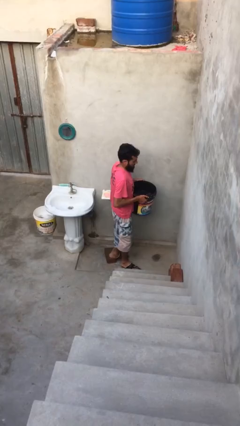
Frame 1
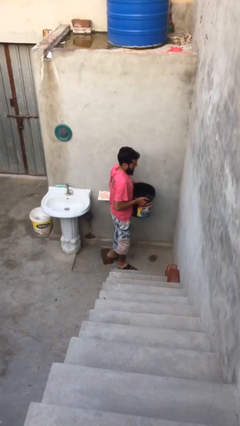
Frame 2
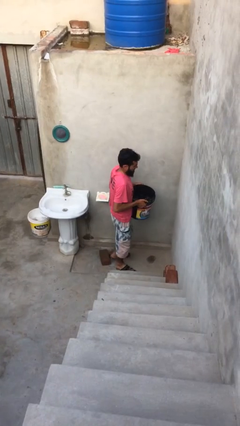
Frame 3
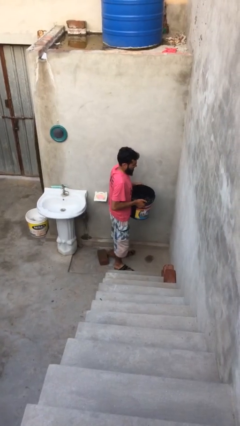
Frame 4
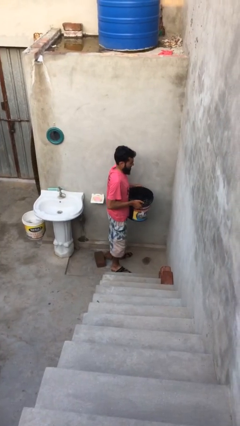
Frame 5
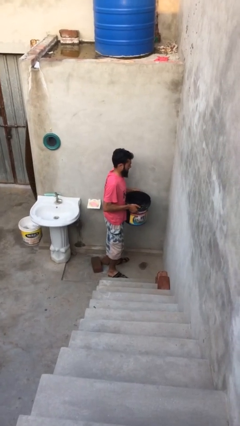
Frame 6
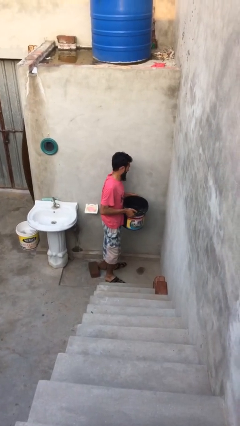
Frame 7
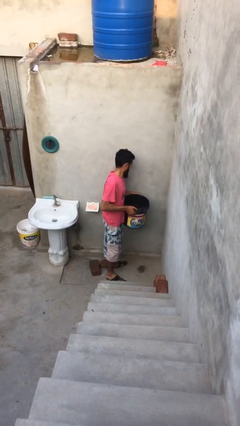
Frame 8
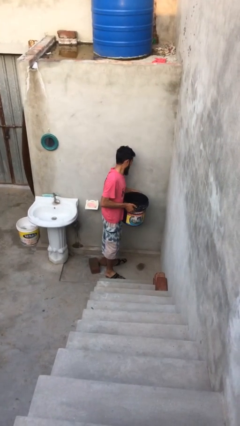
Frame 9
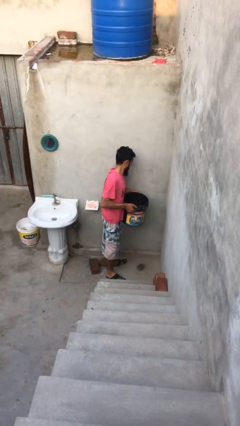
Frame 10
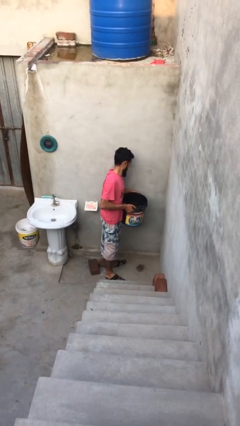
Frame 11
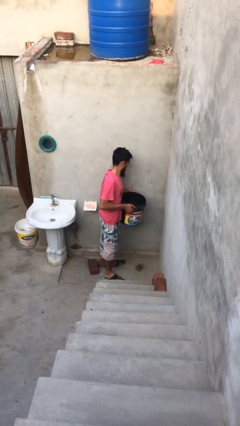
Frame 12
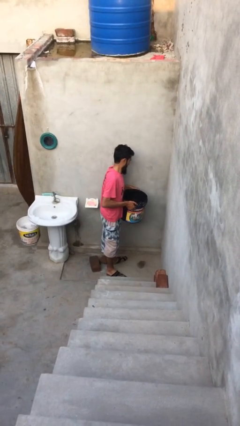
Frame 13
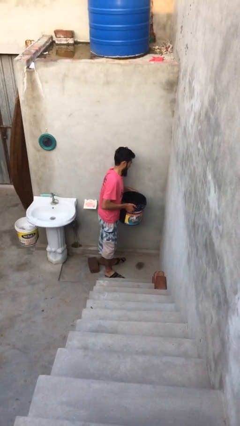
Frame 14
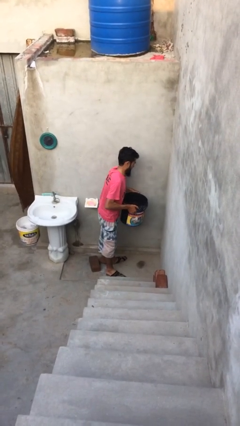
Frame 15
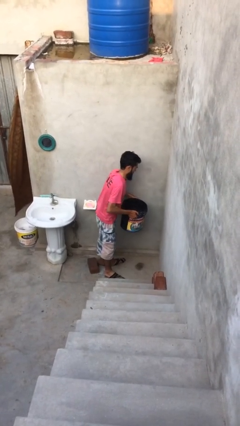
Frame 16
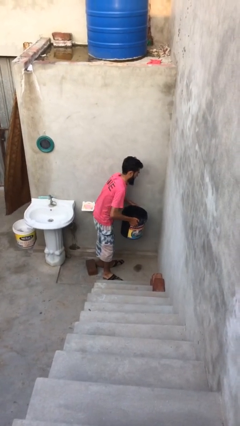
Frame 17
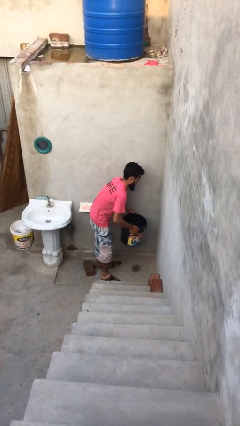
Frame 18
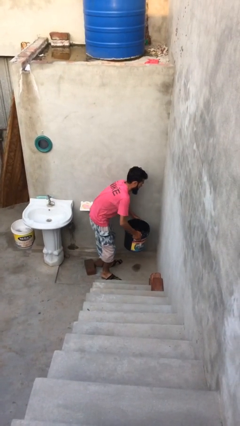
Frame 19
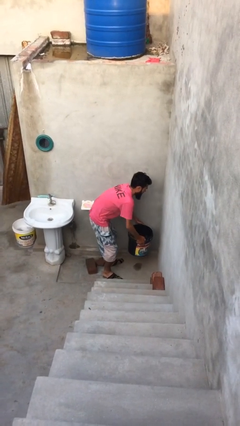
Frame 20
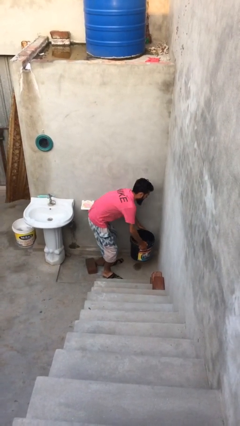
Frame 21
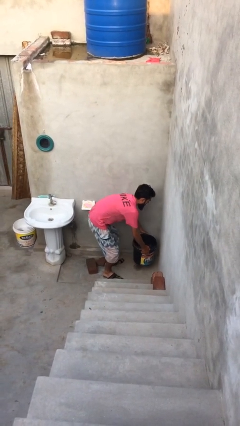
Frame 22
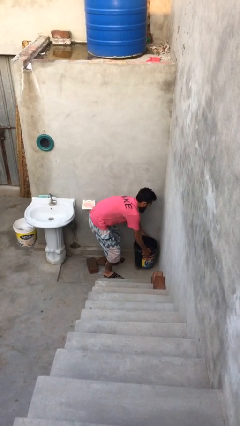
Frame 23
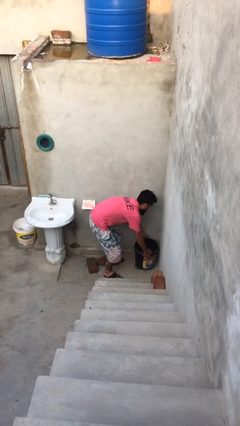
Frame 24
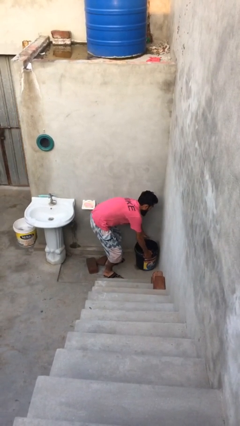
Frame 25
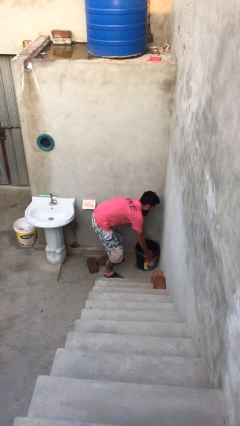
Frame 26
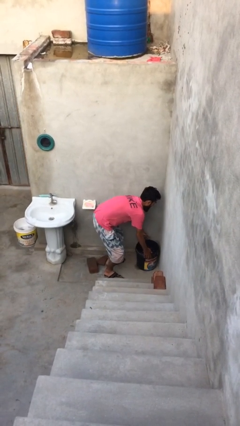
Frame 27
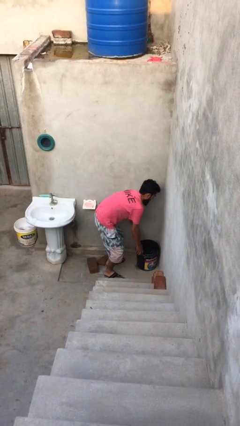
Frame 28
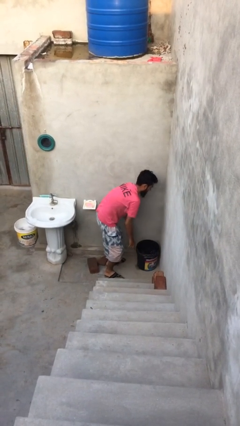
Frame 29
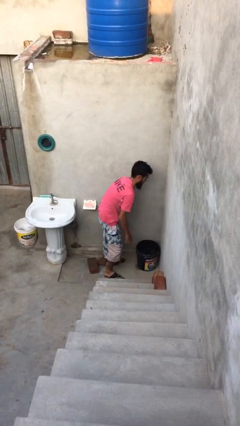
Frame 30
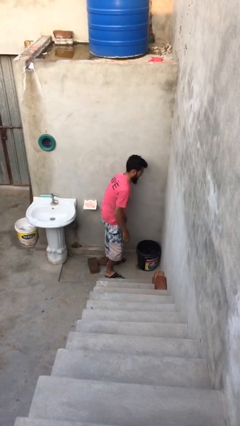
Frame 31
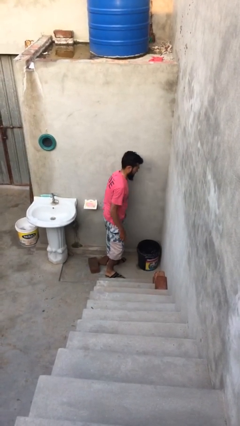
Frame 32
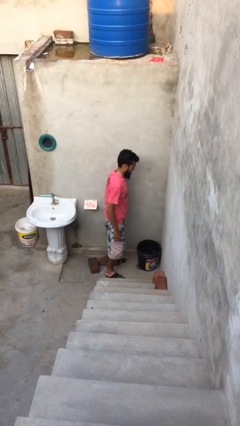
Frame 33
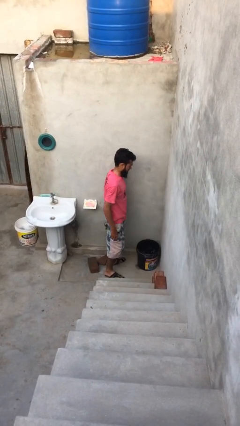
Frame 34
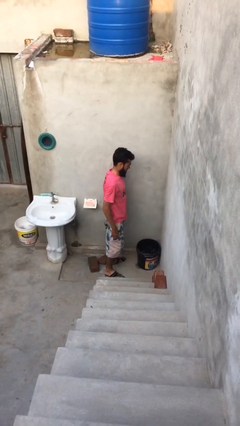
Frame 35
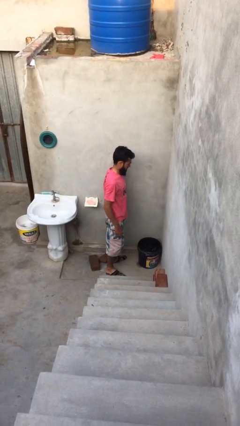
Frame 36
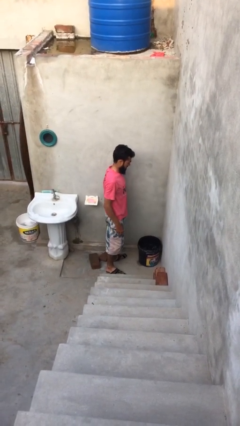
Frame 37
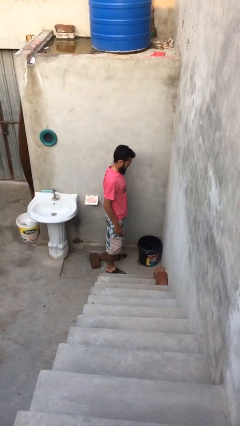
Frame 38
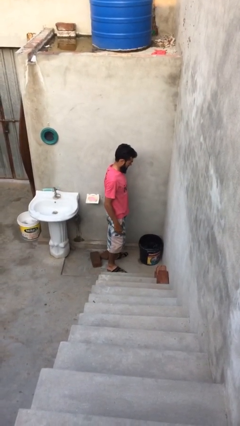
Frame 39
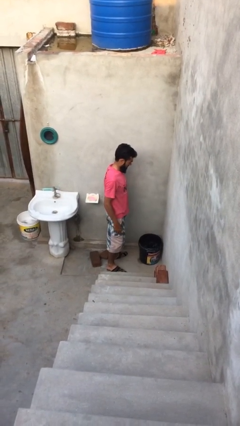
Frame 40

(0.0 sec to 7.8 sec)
person puts down object on floor

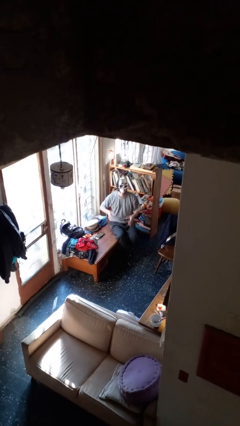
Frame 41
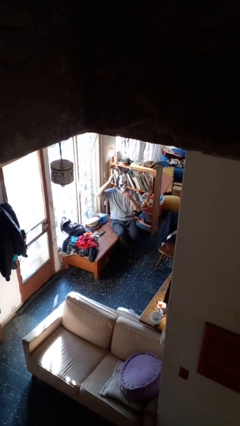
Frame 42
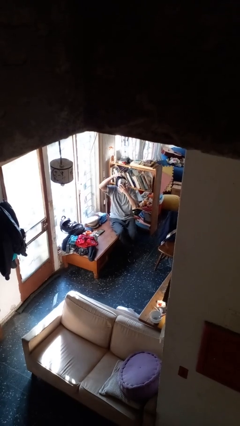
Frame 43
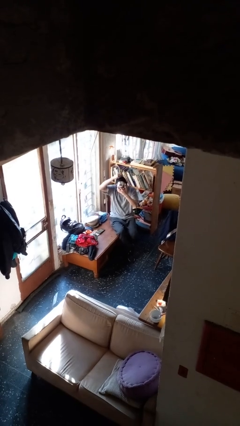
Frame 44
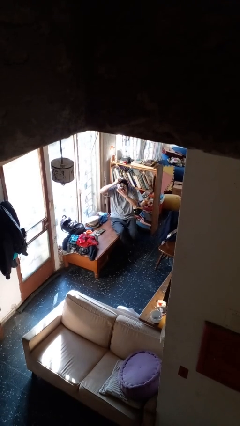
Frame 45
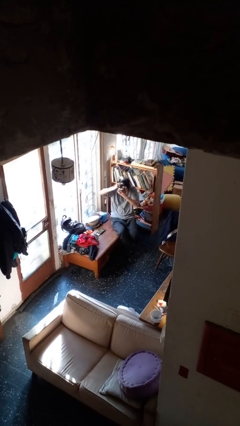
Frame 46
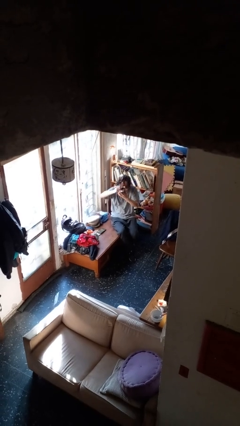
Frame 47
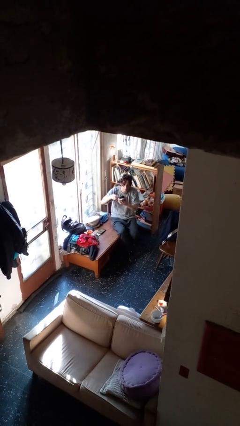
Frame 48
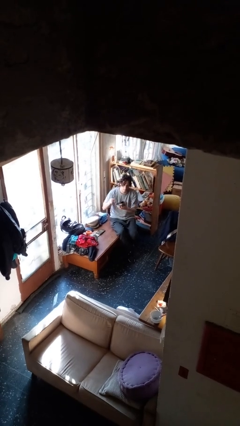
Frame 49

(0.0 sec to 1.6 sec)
person takes off facemask

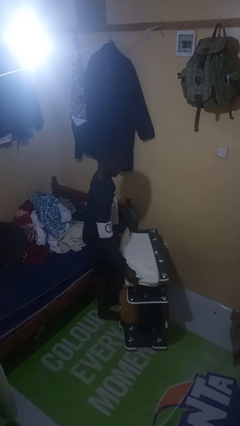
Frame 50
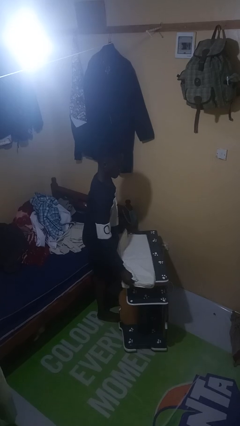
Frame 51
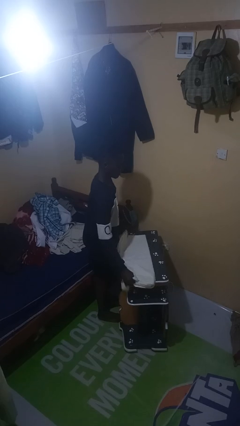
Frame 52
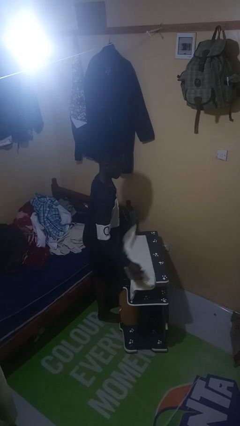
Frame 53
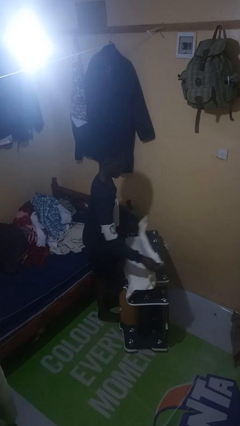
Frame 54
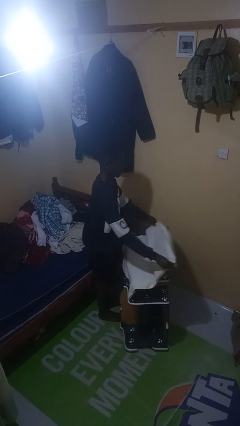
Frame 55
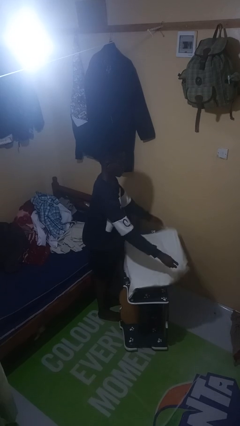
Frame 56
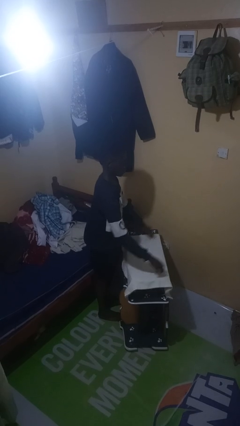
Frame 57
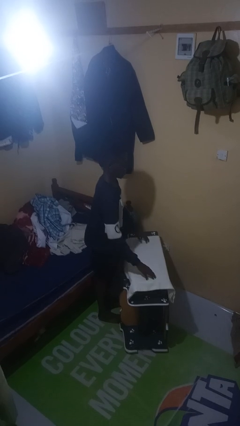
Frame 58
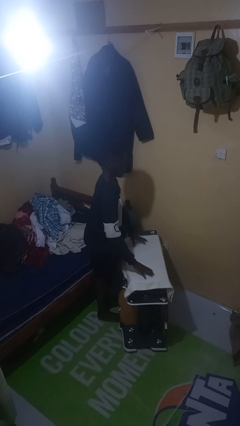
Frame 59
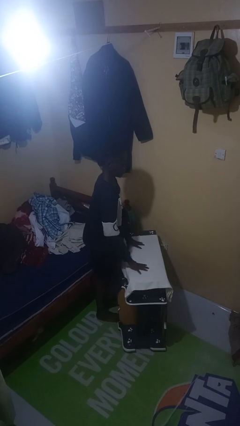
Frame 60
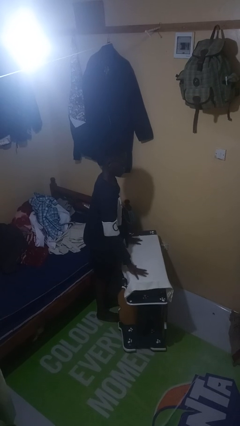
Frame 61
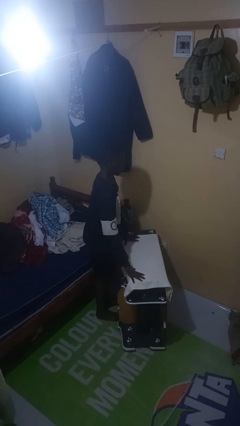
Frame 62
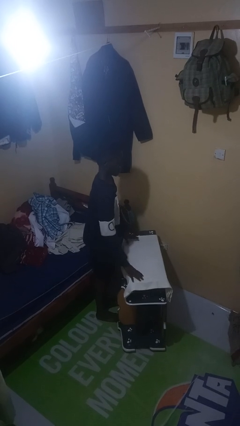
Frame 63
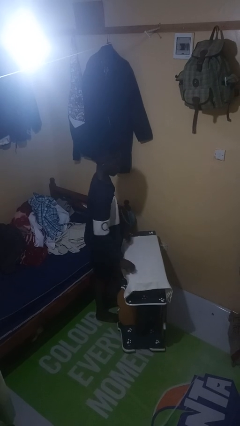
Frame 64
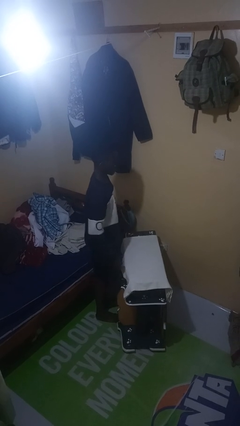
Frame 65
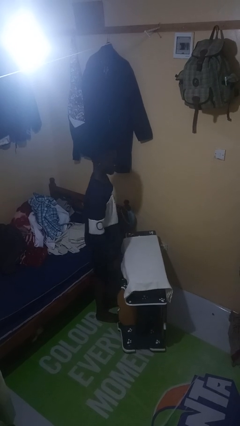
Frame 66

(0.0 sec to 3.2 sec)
person spreads tablecloth

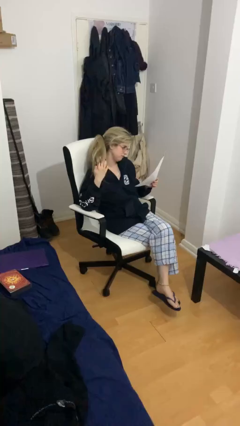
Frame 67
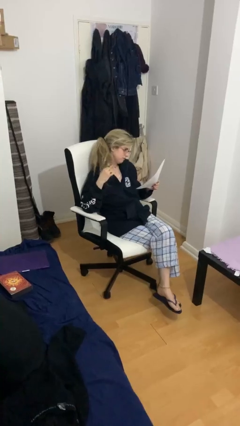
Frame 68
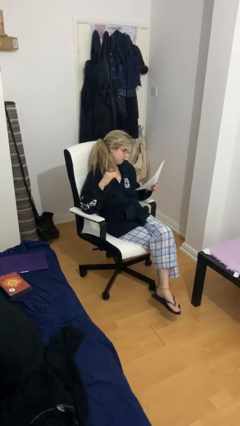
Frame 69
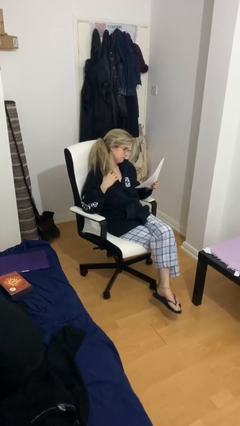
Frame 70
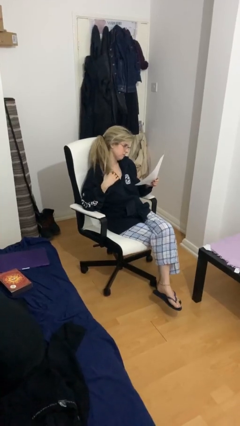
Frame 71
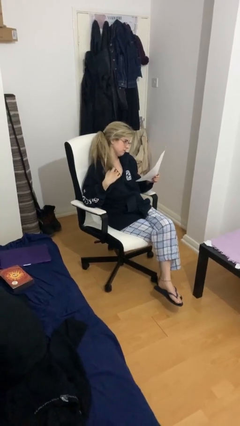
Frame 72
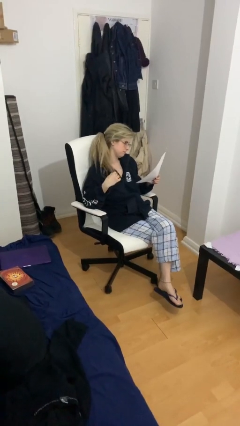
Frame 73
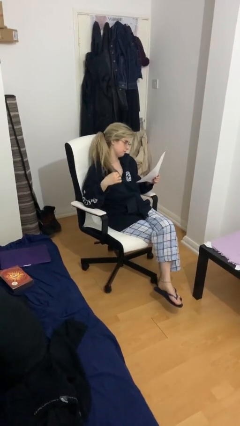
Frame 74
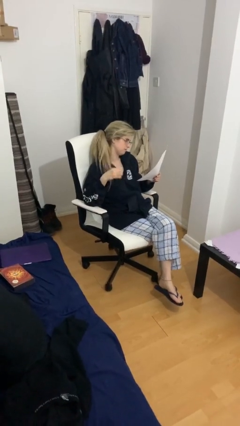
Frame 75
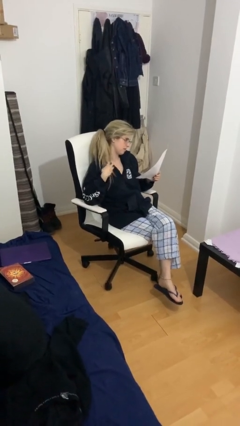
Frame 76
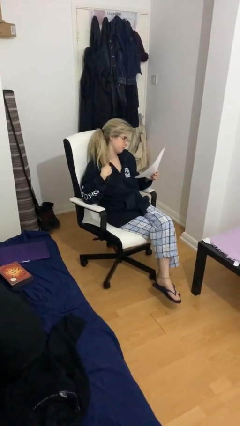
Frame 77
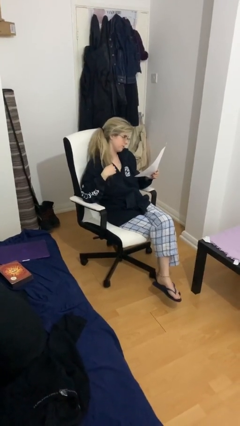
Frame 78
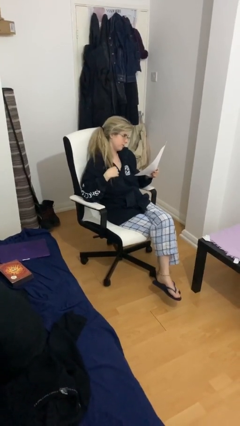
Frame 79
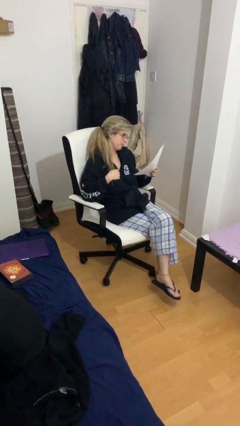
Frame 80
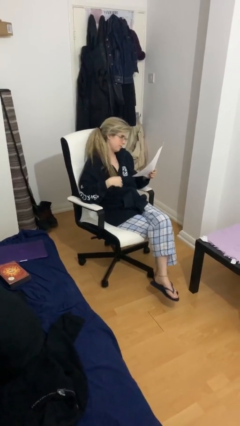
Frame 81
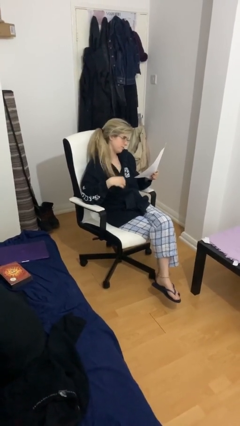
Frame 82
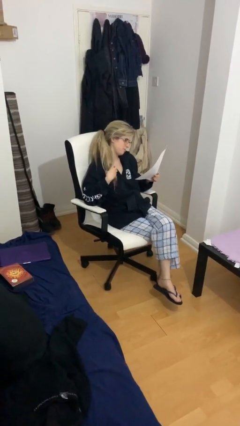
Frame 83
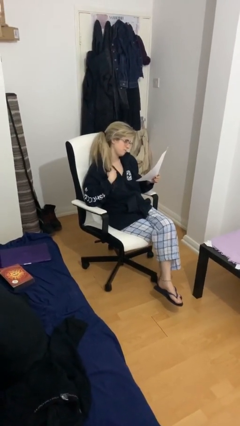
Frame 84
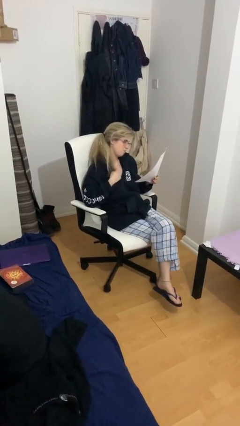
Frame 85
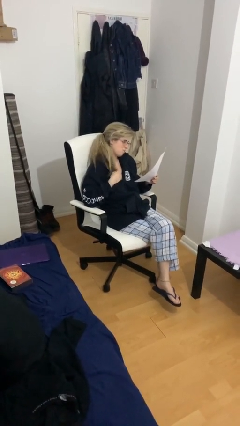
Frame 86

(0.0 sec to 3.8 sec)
person reads document

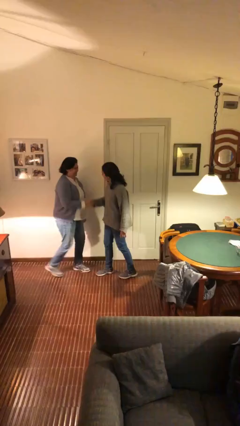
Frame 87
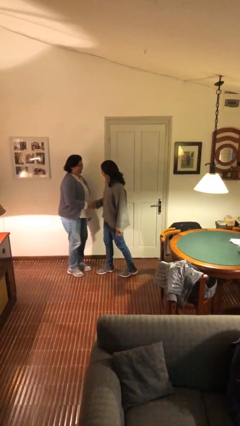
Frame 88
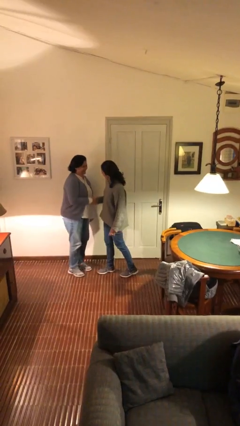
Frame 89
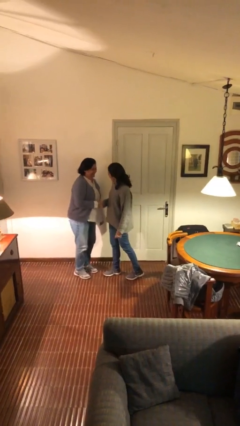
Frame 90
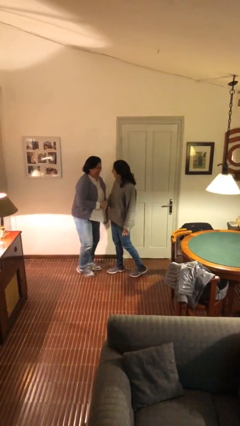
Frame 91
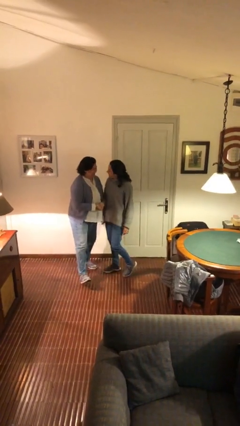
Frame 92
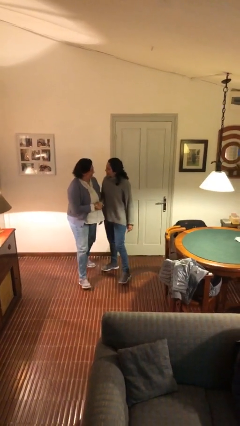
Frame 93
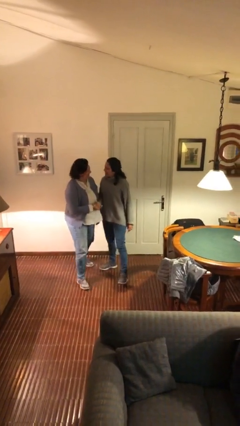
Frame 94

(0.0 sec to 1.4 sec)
person shakes hand
